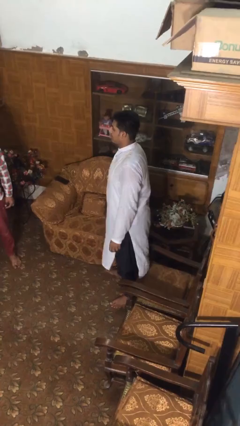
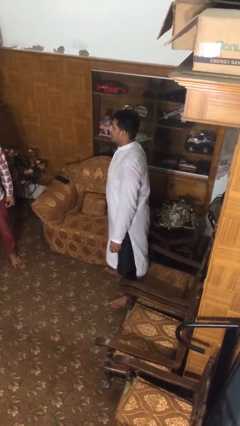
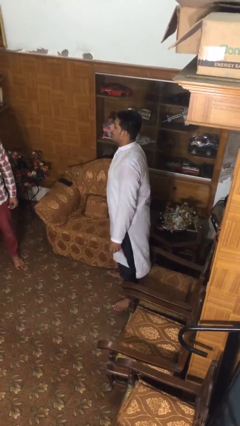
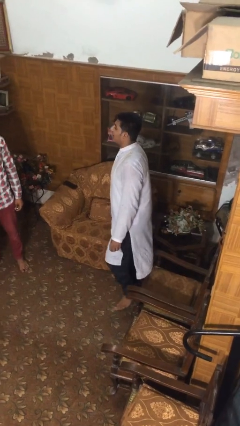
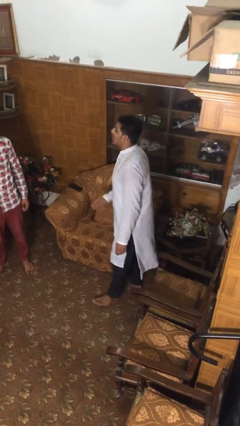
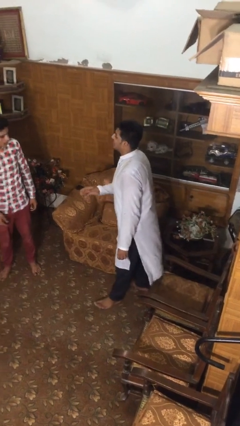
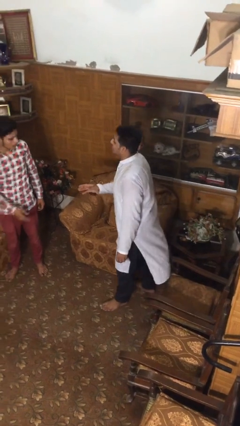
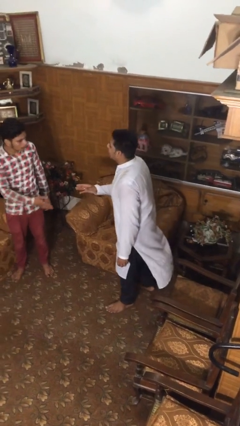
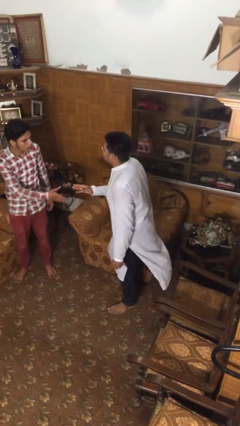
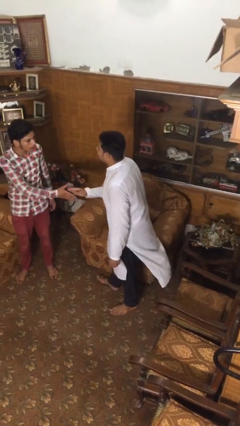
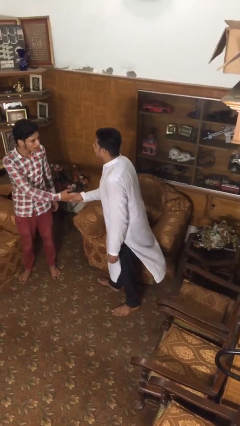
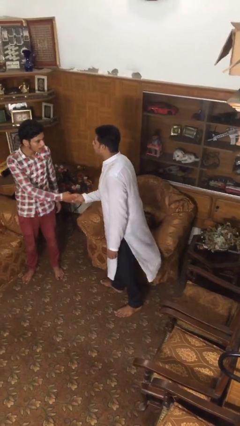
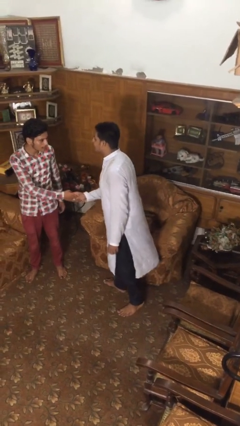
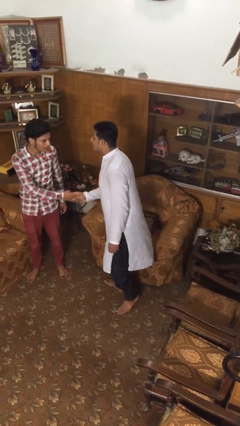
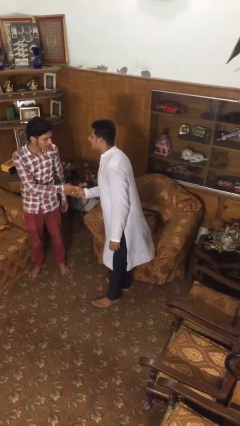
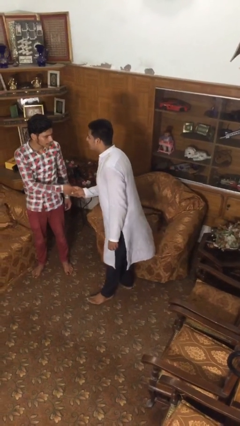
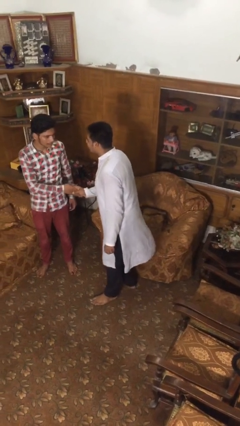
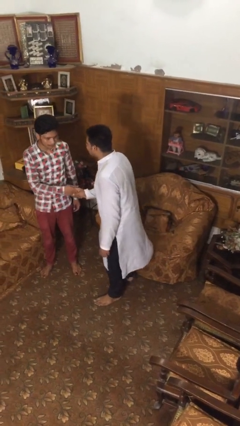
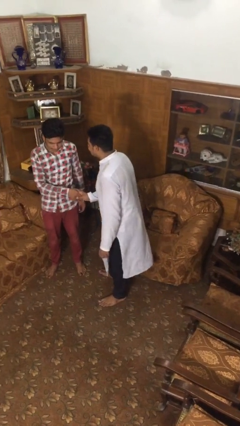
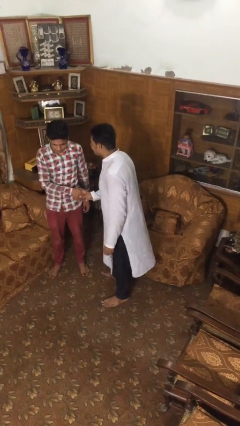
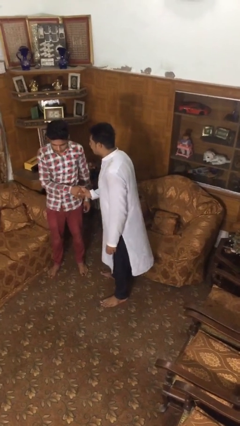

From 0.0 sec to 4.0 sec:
person shakes hand

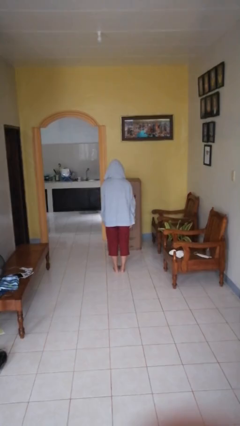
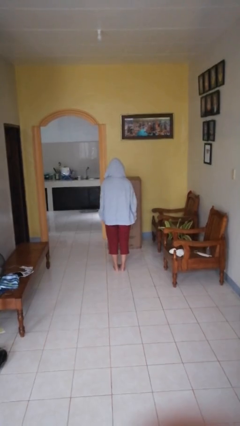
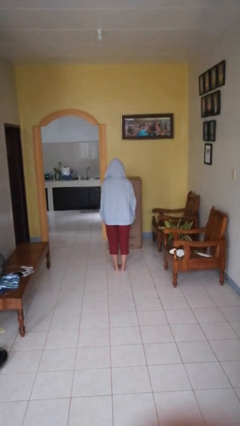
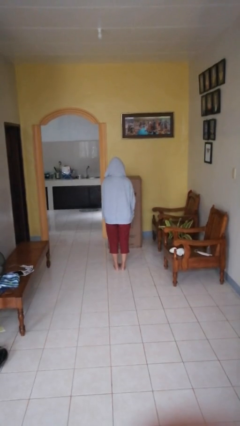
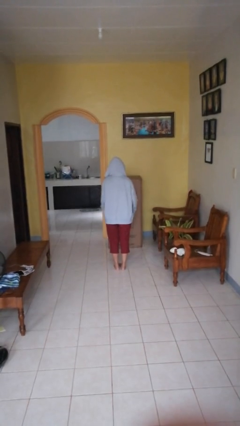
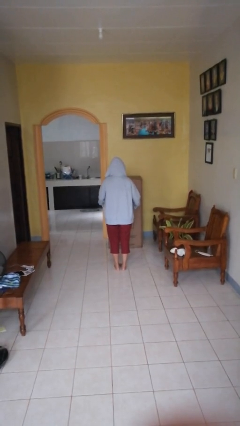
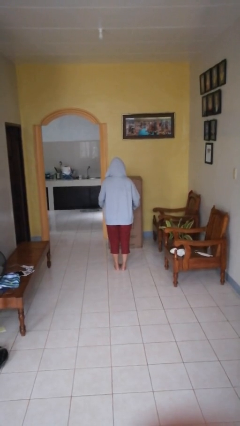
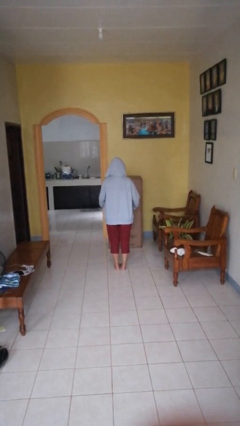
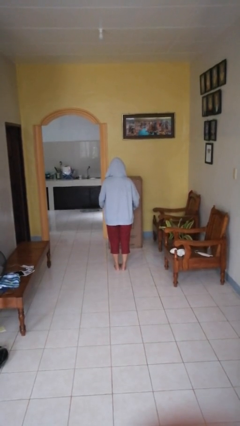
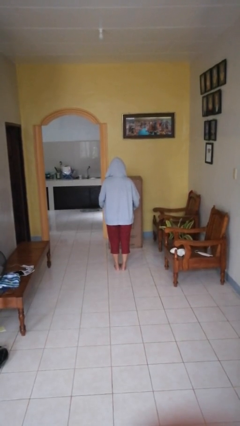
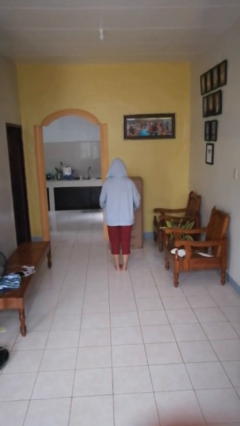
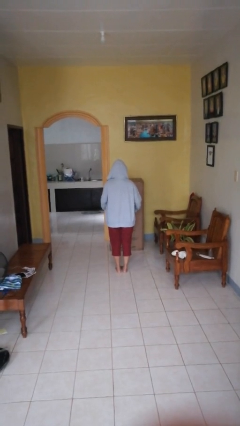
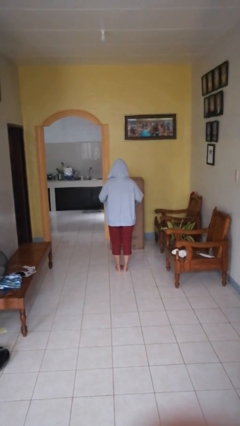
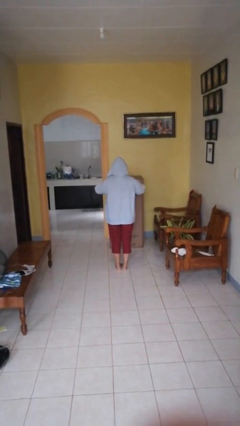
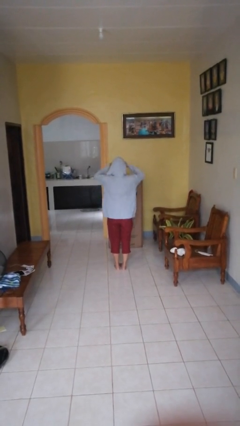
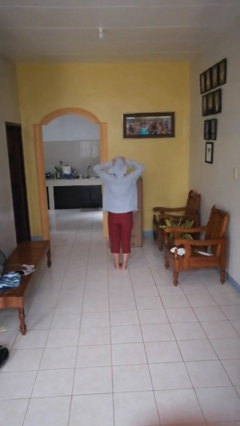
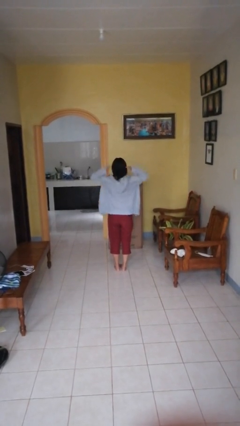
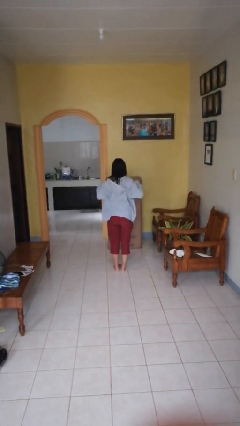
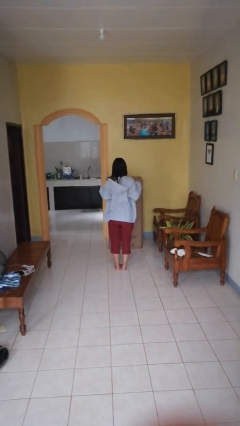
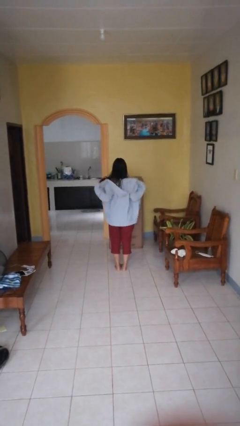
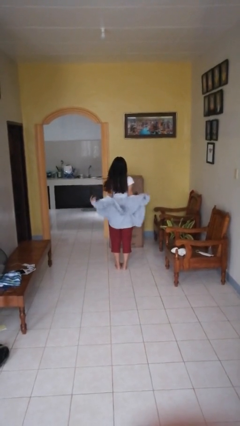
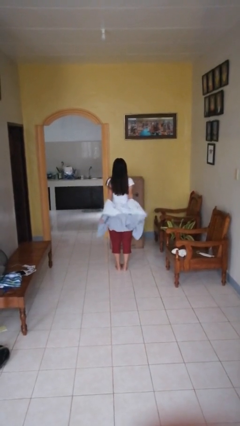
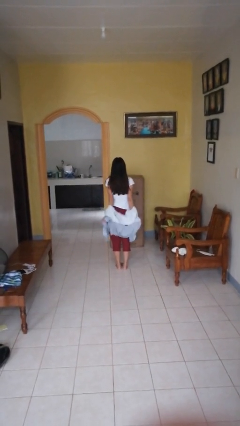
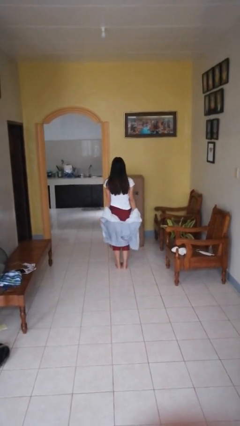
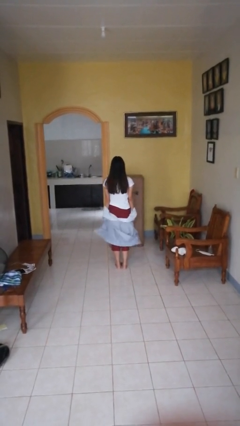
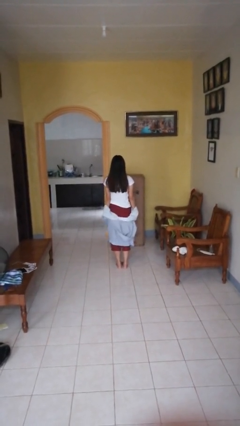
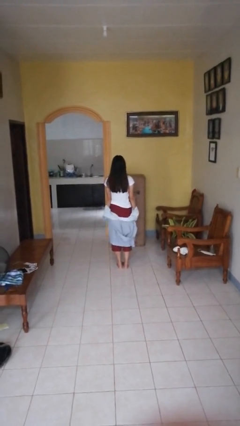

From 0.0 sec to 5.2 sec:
person takes off hoodie

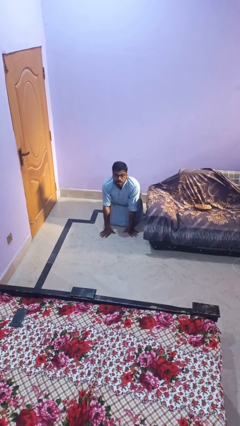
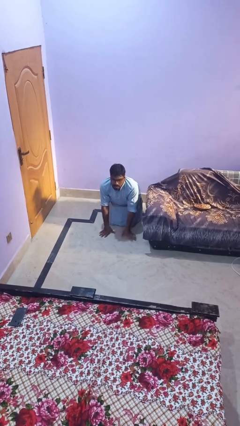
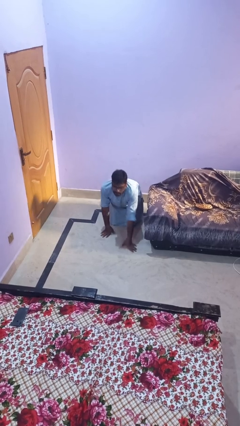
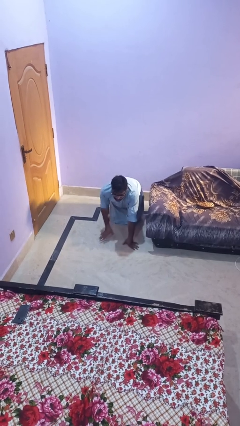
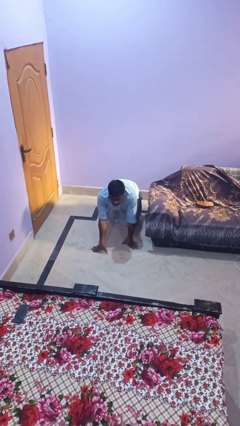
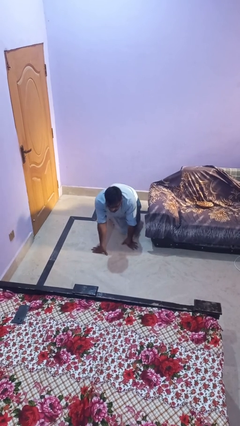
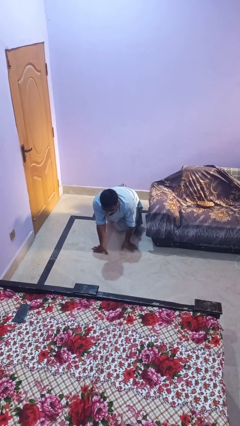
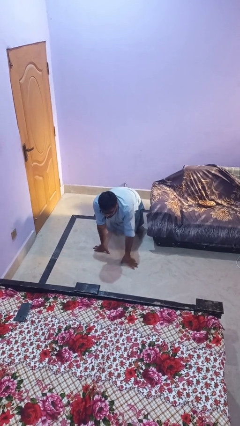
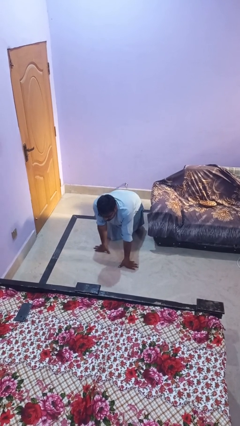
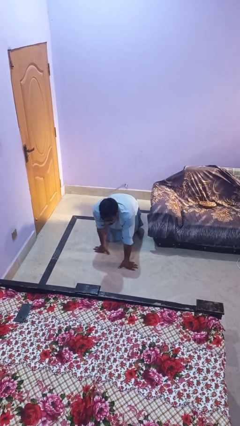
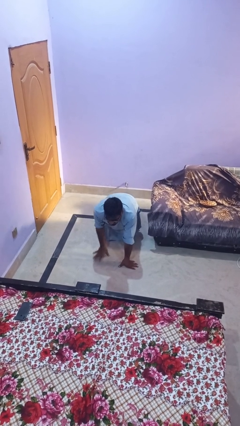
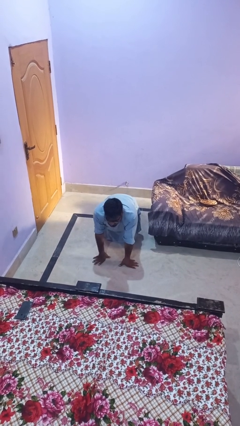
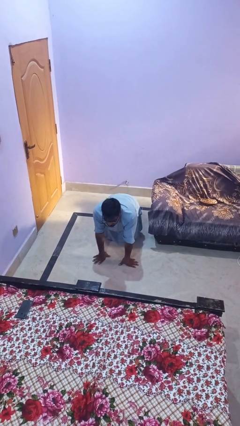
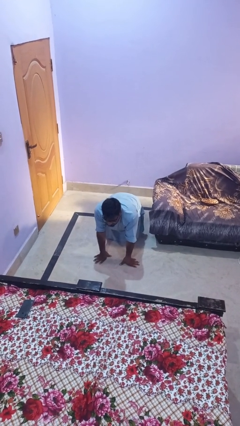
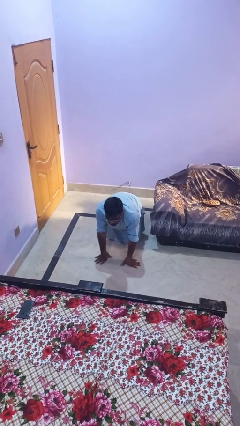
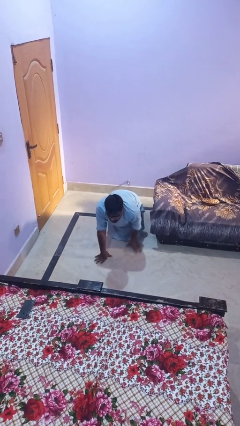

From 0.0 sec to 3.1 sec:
person crawls

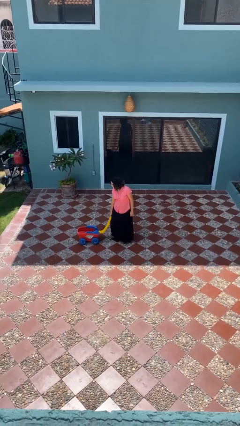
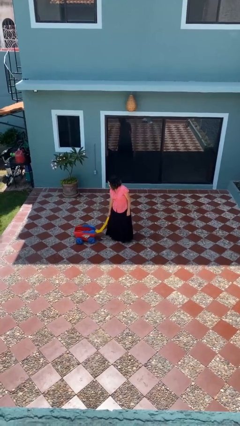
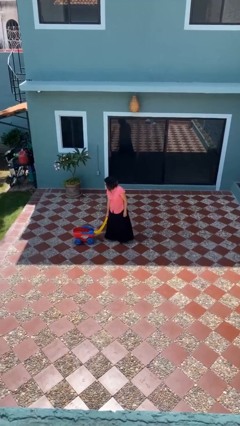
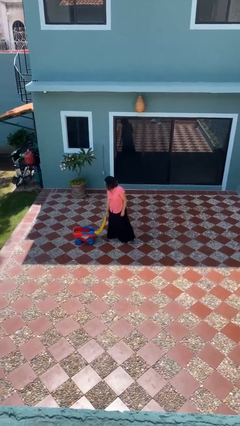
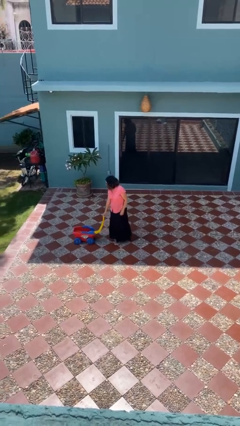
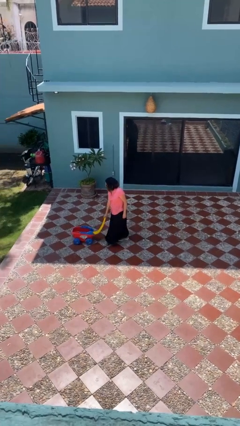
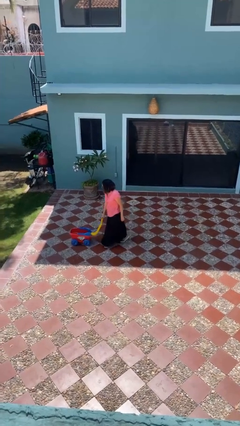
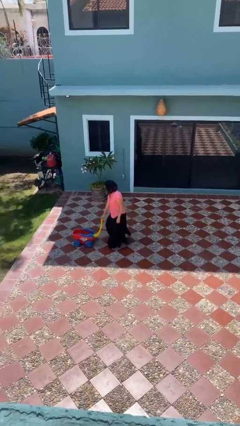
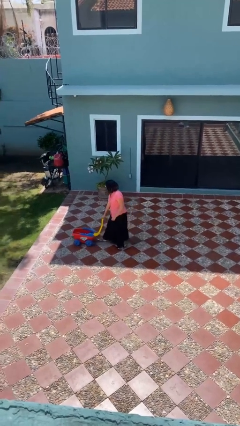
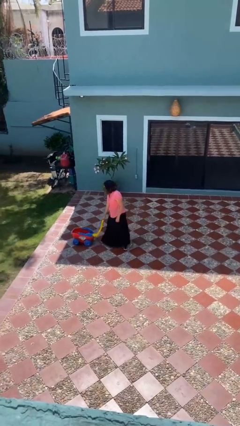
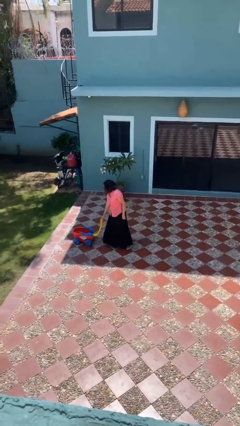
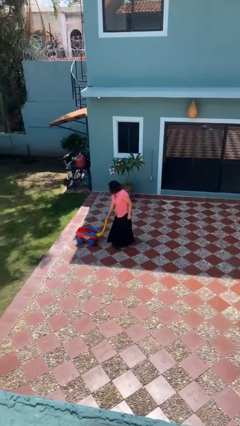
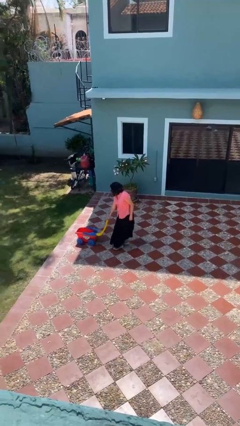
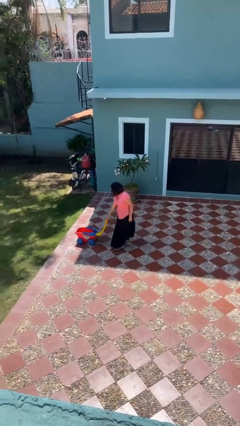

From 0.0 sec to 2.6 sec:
person pushes wheeled cart

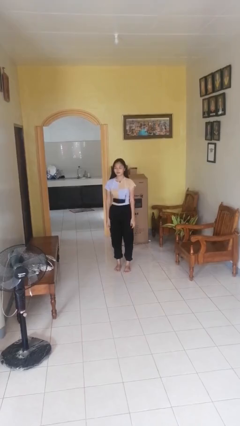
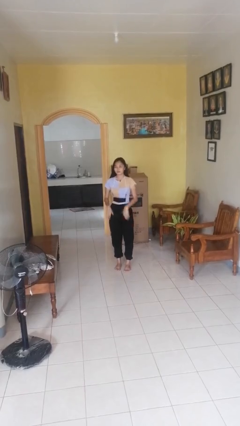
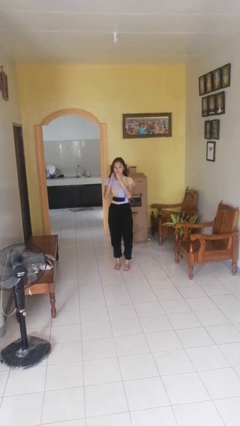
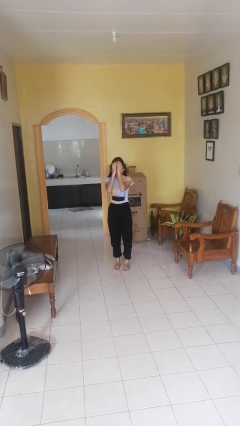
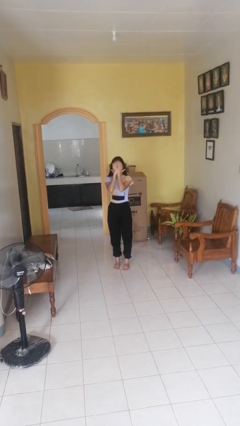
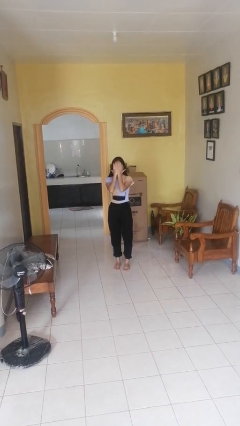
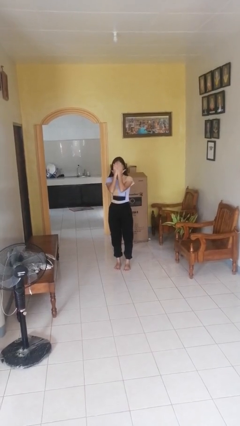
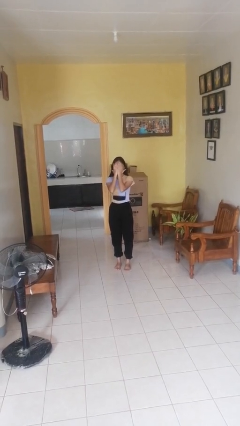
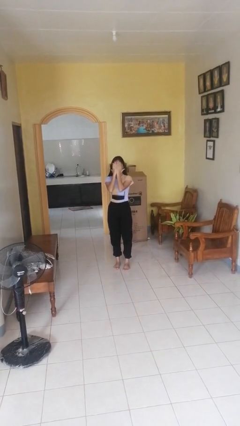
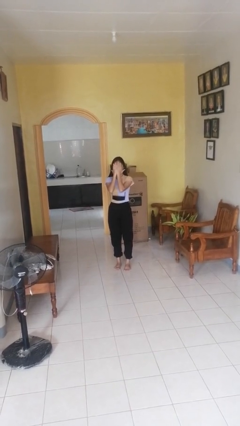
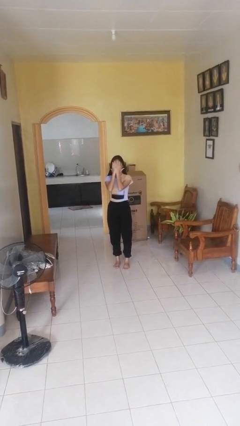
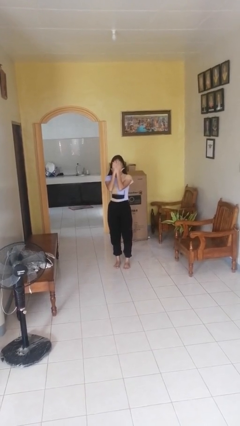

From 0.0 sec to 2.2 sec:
person covers face with hands

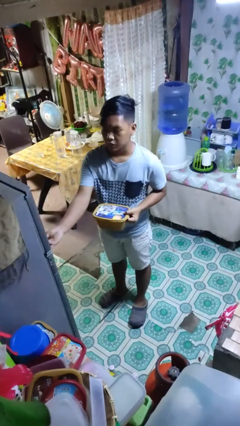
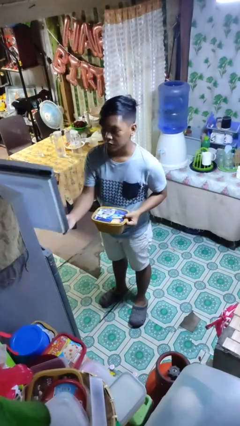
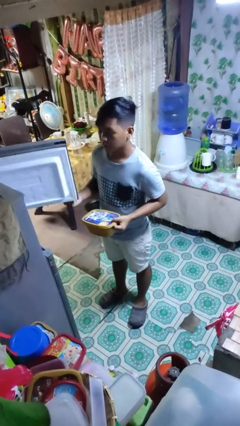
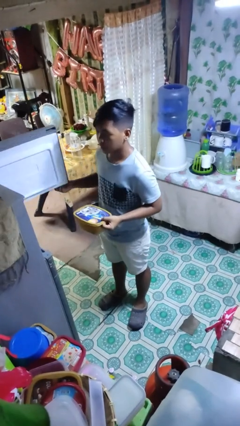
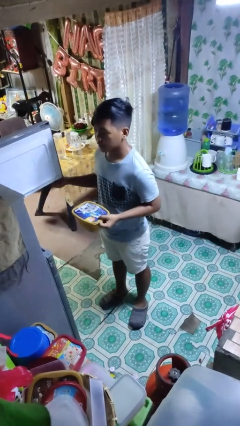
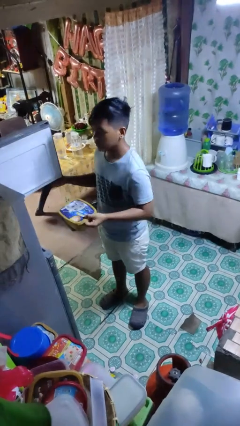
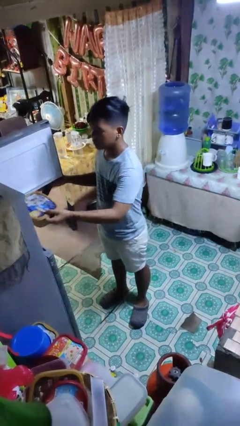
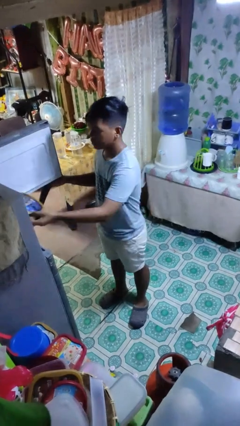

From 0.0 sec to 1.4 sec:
person opens refrigerator
